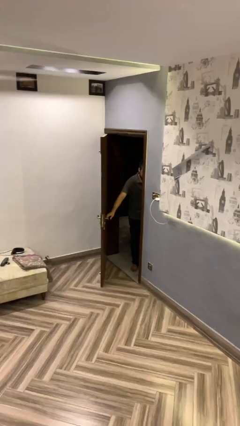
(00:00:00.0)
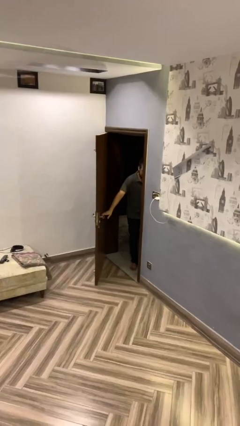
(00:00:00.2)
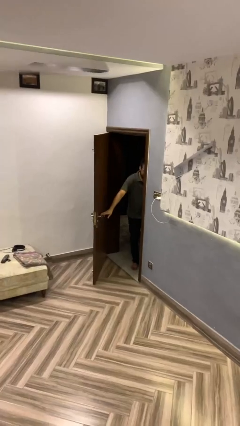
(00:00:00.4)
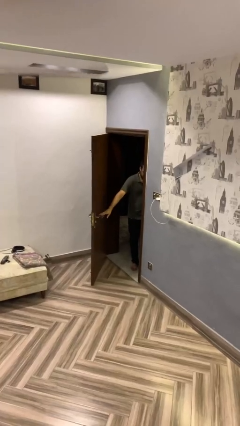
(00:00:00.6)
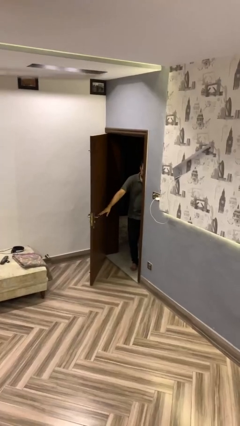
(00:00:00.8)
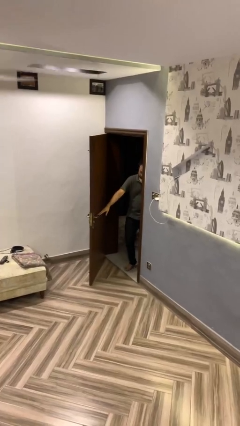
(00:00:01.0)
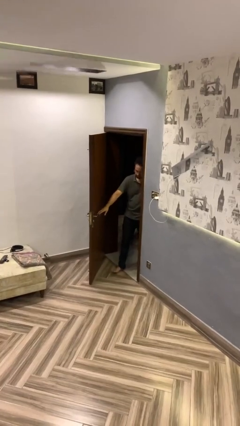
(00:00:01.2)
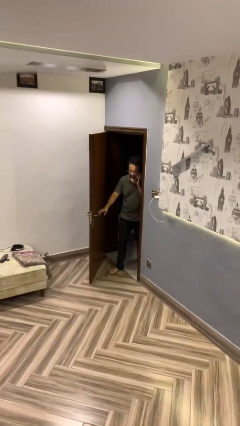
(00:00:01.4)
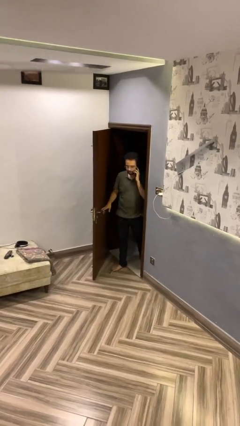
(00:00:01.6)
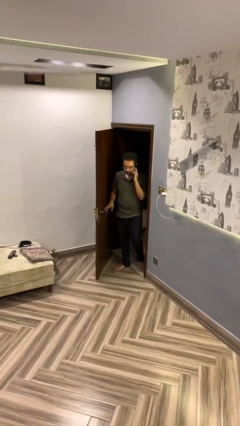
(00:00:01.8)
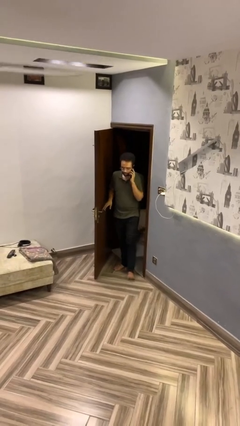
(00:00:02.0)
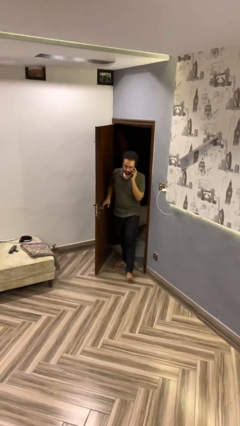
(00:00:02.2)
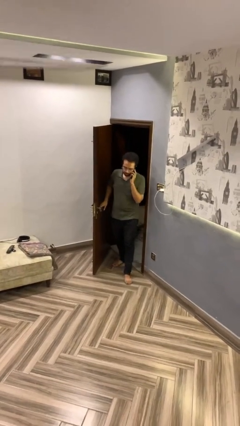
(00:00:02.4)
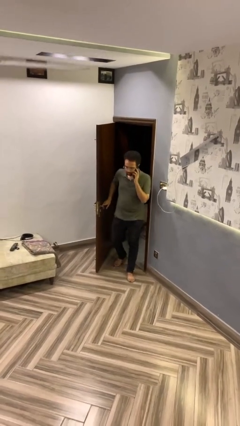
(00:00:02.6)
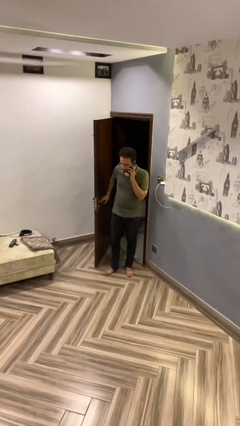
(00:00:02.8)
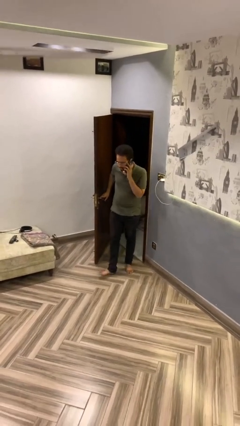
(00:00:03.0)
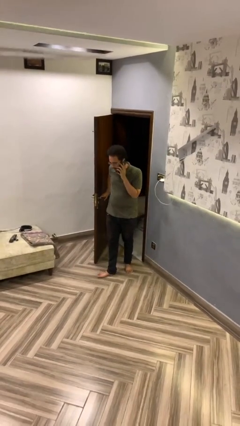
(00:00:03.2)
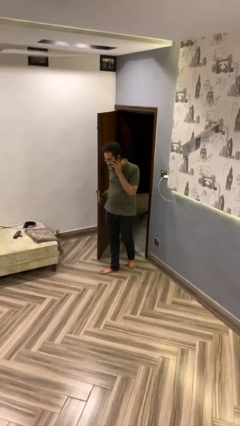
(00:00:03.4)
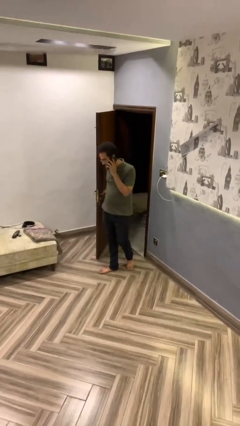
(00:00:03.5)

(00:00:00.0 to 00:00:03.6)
person enters scene through structure

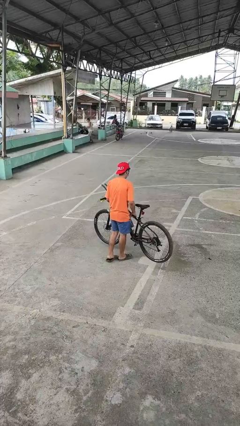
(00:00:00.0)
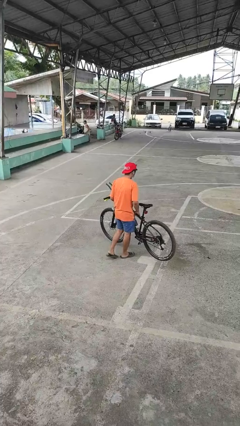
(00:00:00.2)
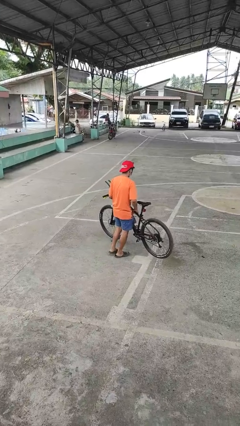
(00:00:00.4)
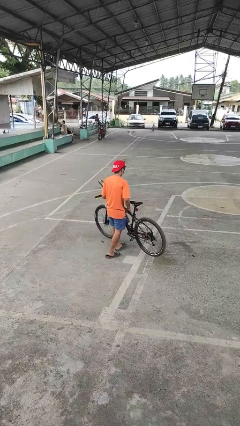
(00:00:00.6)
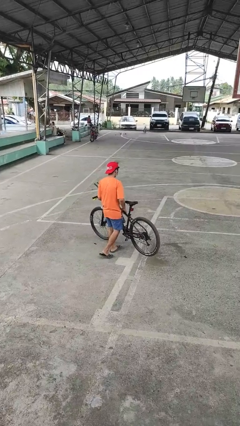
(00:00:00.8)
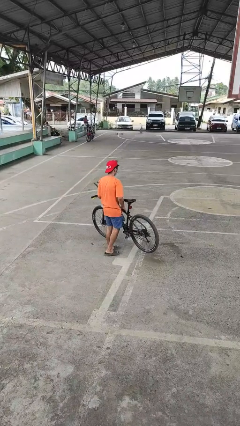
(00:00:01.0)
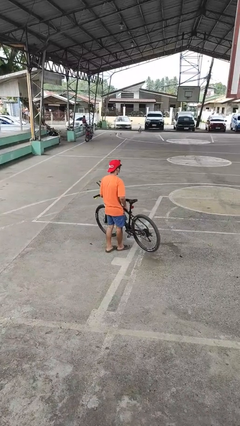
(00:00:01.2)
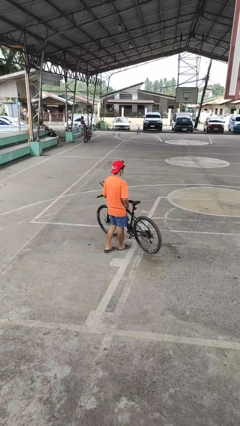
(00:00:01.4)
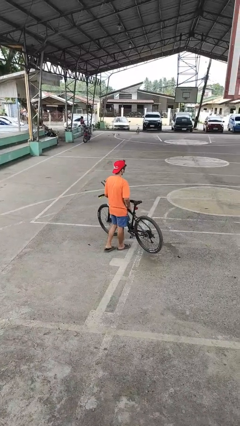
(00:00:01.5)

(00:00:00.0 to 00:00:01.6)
person carries bicycle

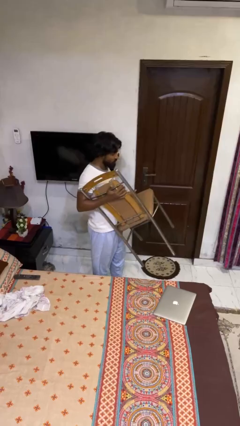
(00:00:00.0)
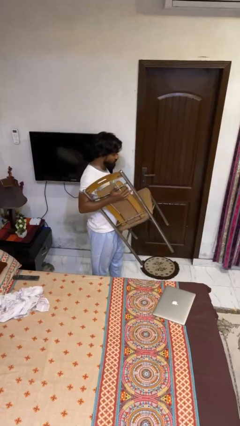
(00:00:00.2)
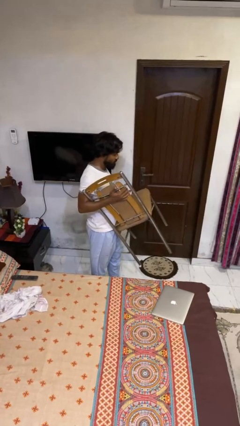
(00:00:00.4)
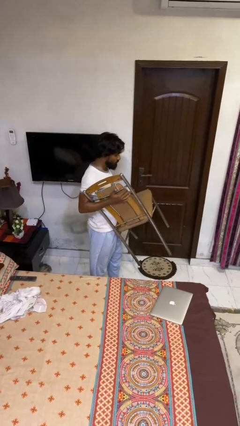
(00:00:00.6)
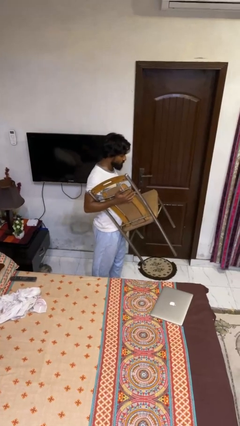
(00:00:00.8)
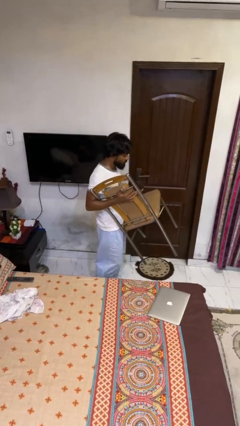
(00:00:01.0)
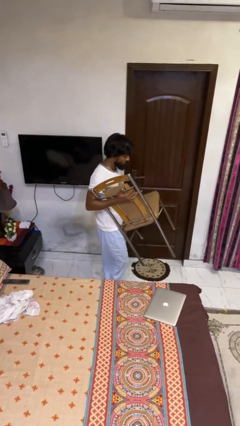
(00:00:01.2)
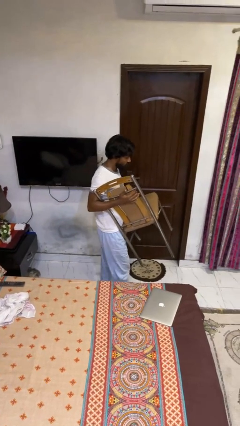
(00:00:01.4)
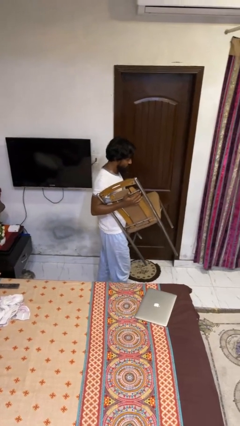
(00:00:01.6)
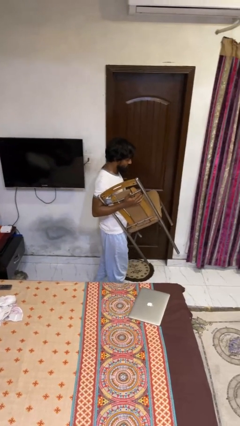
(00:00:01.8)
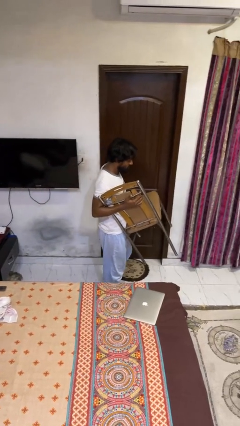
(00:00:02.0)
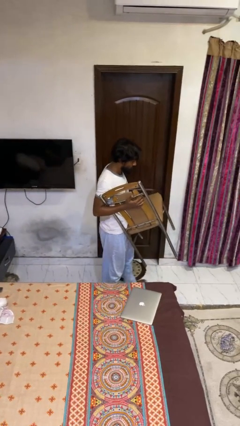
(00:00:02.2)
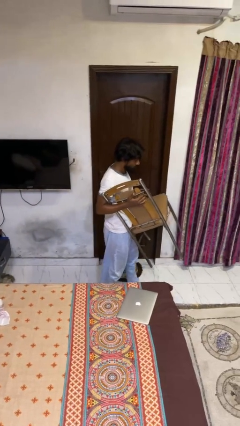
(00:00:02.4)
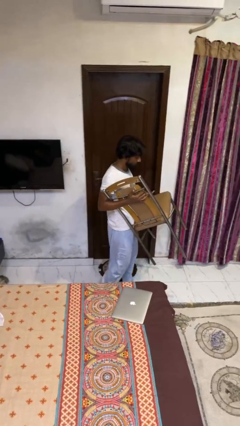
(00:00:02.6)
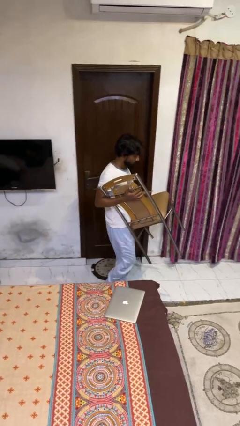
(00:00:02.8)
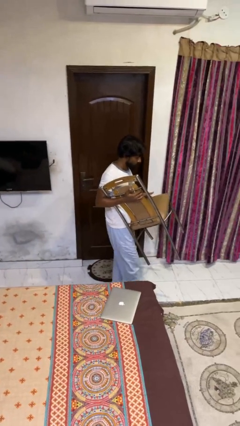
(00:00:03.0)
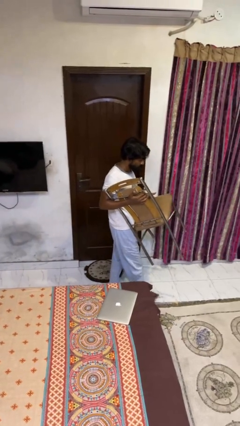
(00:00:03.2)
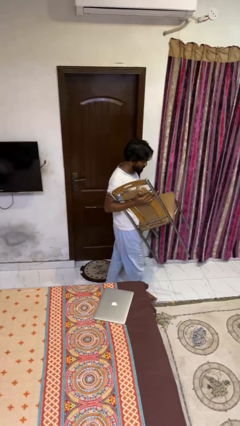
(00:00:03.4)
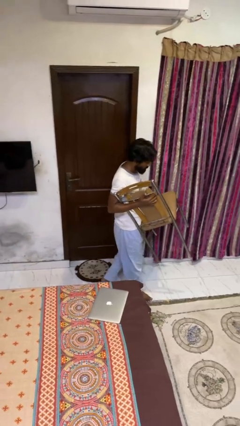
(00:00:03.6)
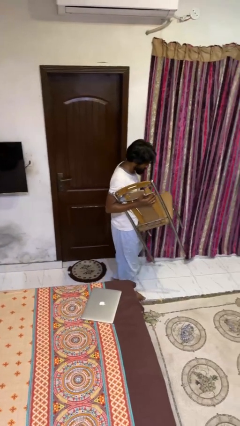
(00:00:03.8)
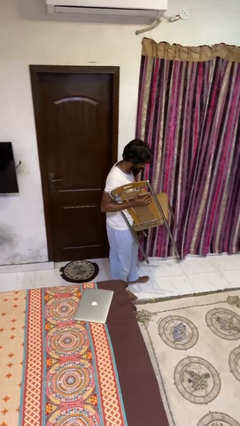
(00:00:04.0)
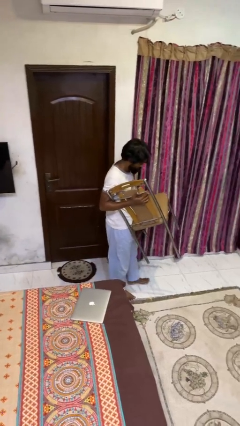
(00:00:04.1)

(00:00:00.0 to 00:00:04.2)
person carries furniture

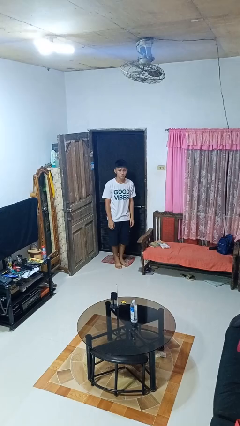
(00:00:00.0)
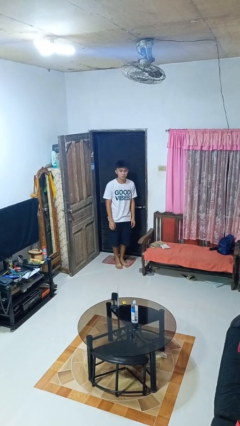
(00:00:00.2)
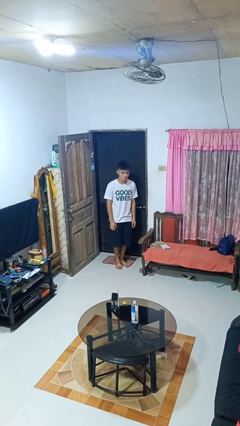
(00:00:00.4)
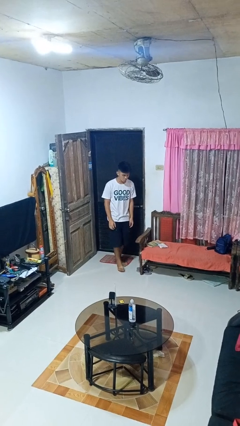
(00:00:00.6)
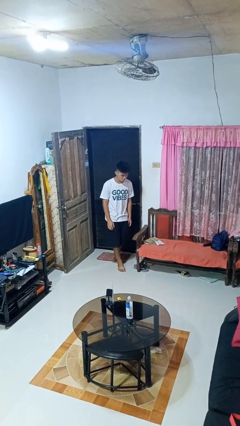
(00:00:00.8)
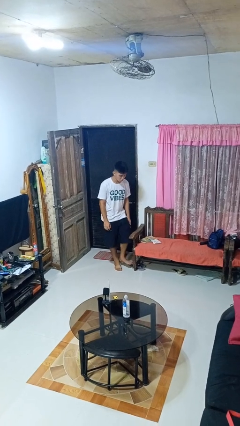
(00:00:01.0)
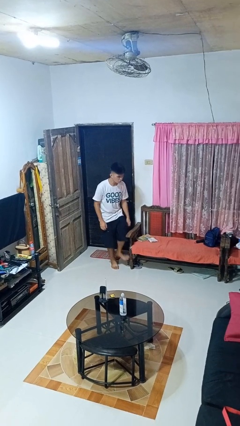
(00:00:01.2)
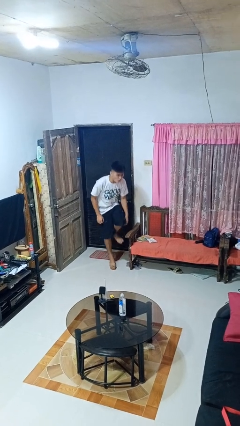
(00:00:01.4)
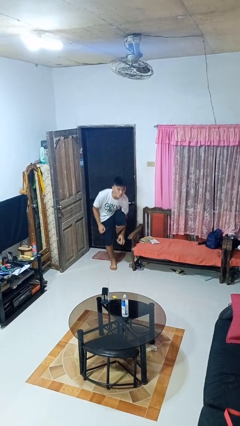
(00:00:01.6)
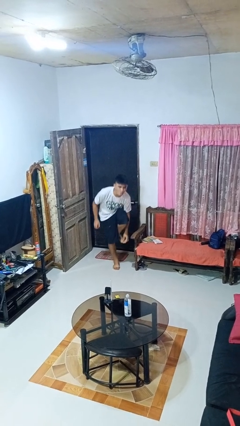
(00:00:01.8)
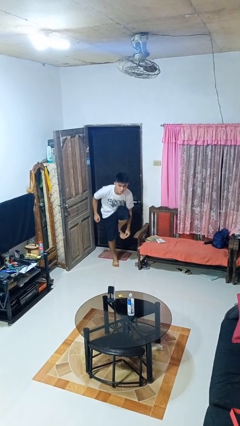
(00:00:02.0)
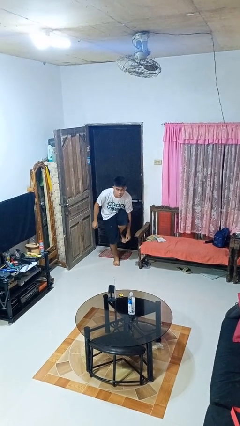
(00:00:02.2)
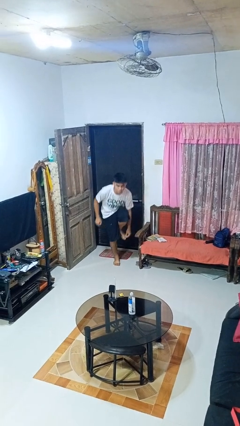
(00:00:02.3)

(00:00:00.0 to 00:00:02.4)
person stubs toe

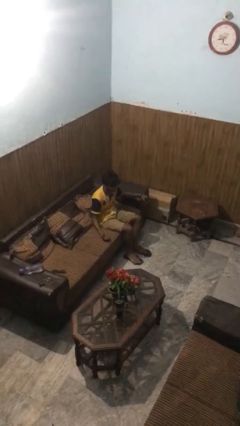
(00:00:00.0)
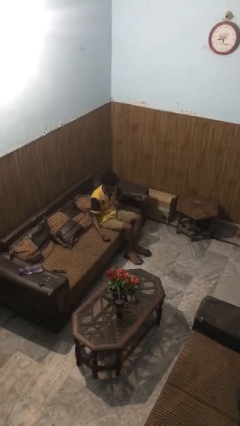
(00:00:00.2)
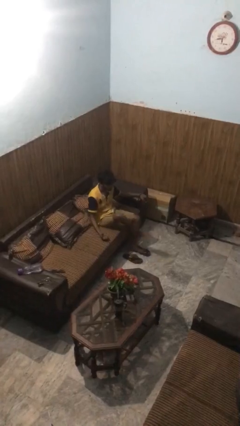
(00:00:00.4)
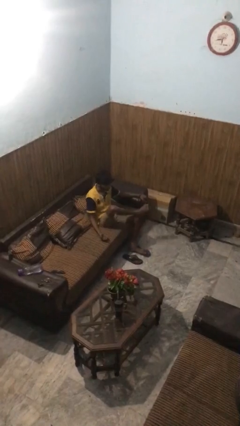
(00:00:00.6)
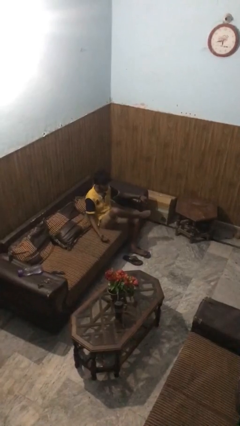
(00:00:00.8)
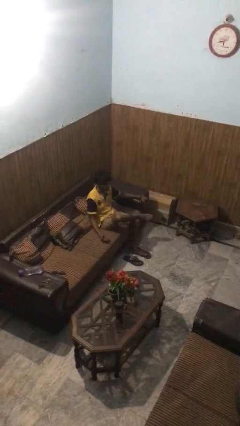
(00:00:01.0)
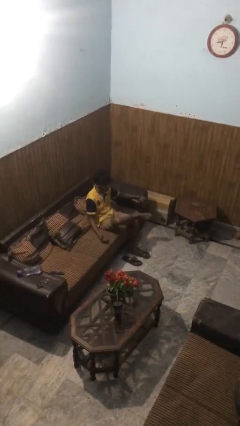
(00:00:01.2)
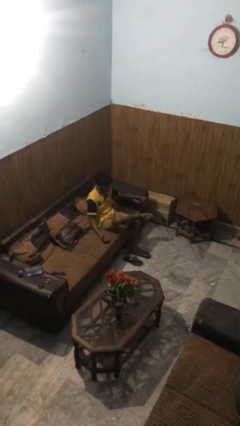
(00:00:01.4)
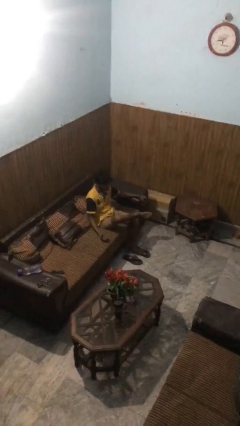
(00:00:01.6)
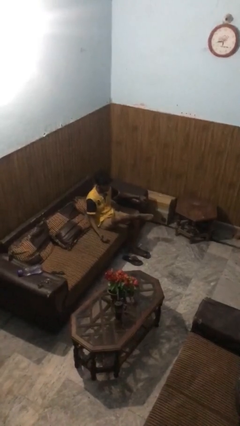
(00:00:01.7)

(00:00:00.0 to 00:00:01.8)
person crosses legs

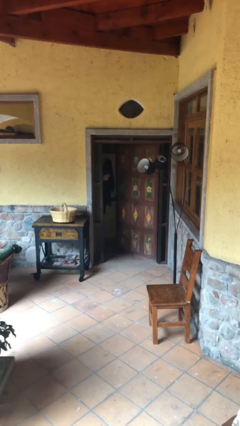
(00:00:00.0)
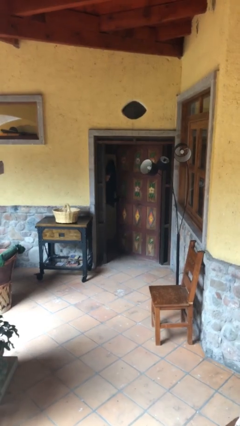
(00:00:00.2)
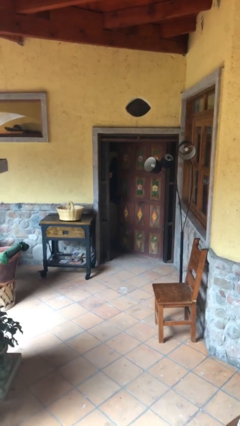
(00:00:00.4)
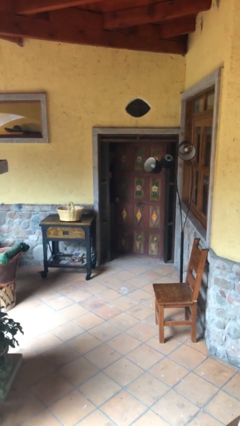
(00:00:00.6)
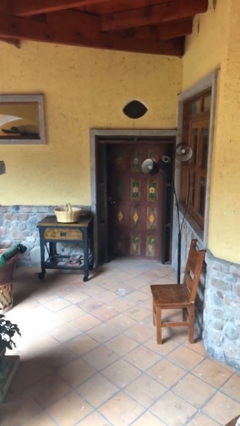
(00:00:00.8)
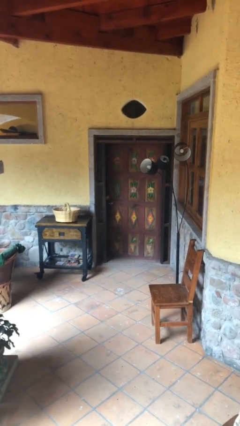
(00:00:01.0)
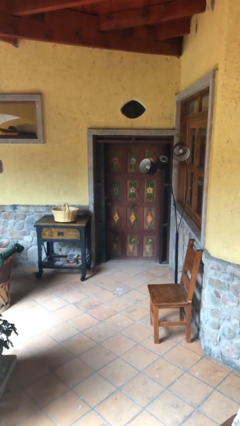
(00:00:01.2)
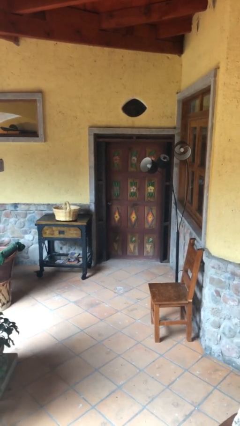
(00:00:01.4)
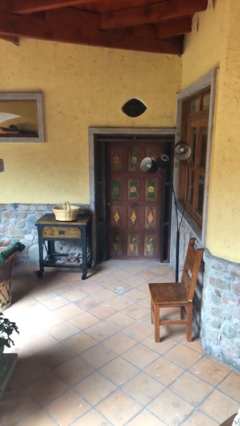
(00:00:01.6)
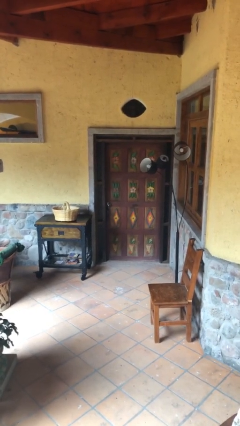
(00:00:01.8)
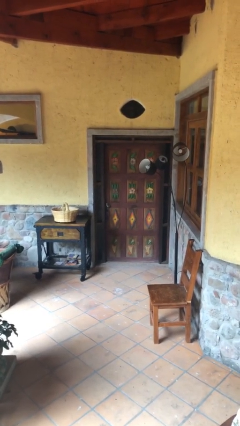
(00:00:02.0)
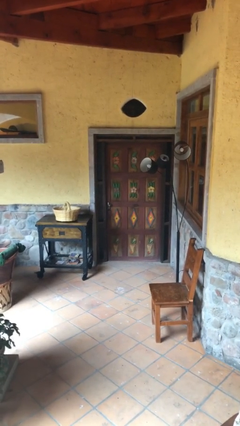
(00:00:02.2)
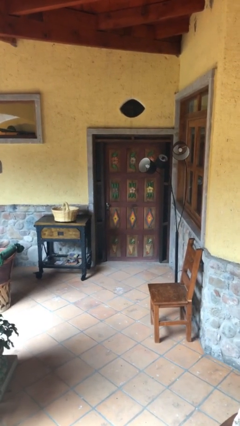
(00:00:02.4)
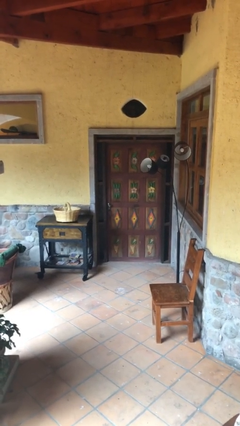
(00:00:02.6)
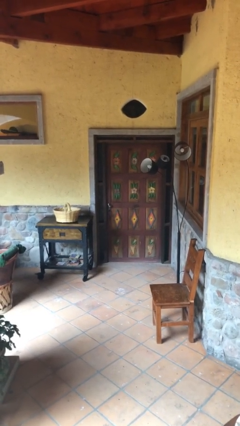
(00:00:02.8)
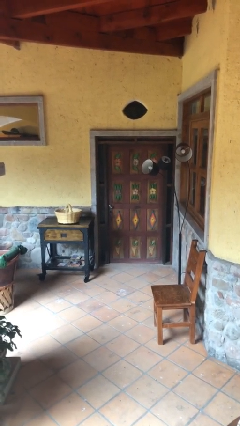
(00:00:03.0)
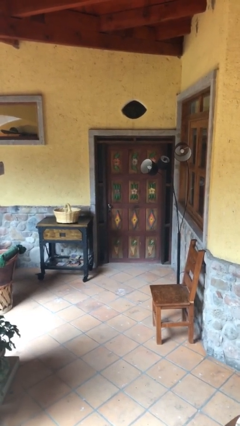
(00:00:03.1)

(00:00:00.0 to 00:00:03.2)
person closes facility door

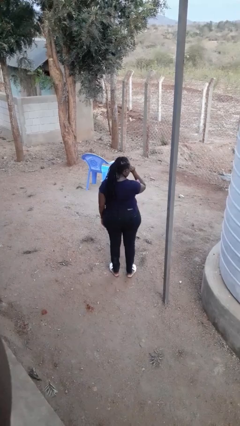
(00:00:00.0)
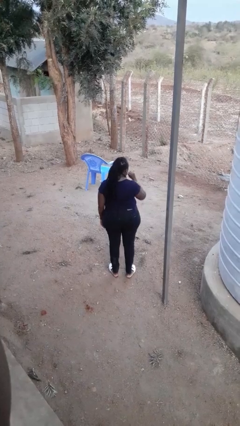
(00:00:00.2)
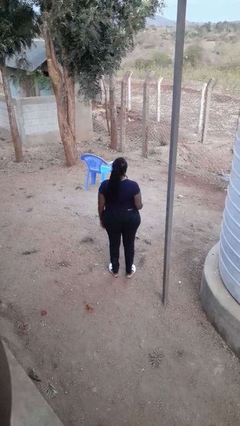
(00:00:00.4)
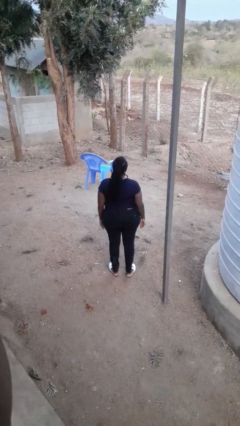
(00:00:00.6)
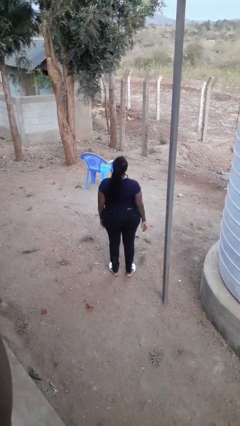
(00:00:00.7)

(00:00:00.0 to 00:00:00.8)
person rubs eyes
